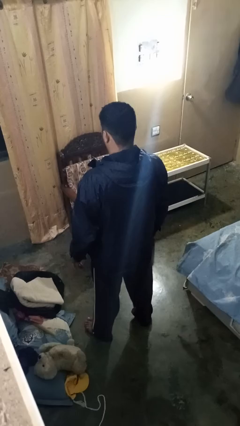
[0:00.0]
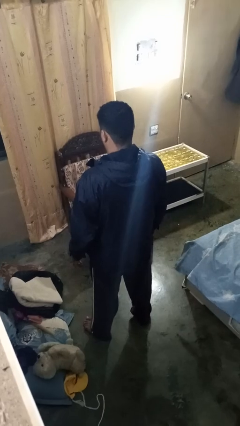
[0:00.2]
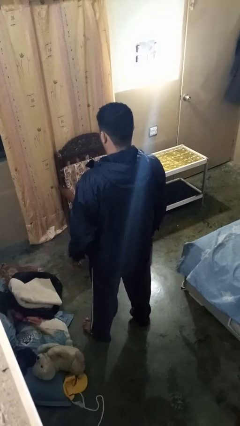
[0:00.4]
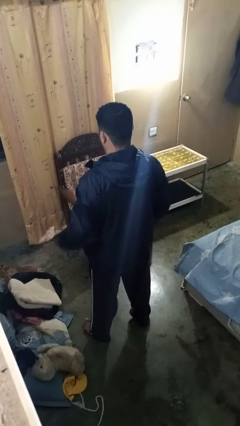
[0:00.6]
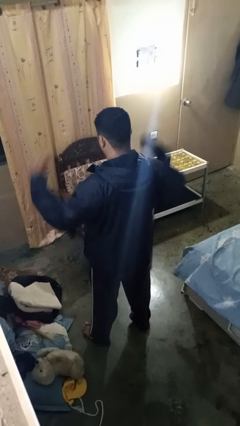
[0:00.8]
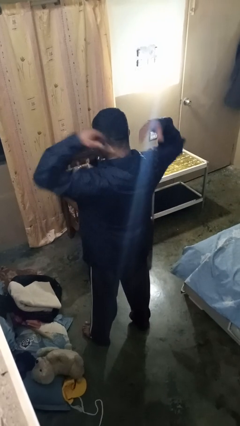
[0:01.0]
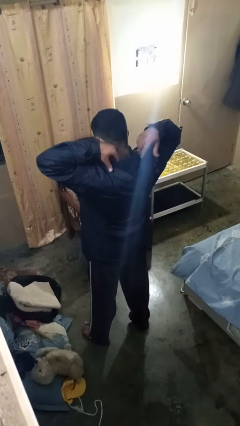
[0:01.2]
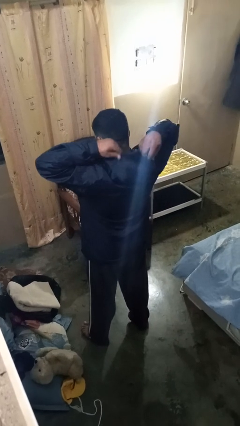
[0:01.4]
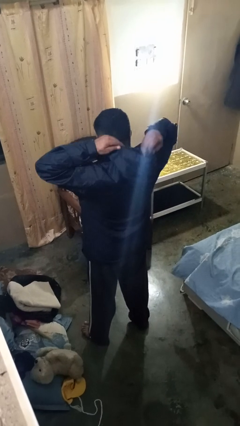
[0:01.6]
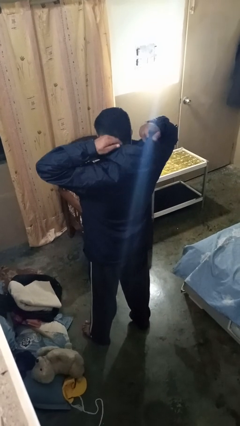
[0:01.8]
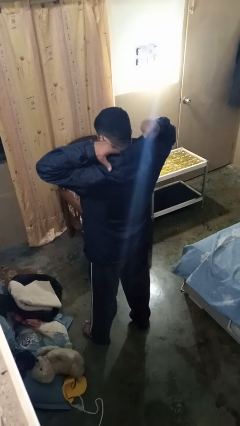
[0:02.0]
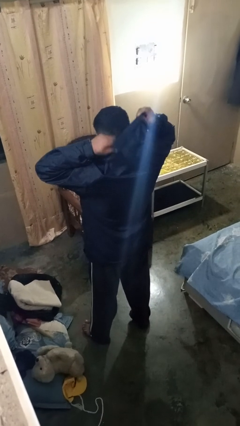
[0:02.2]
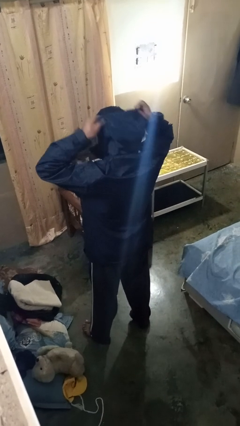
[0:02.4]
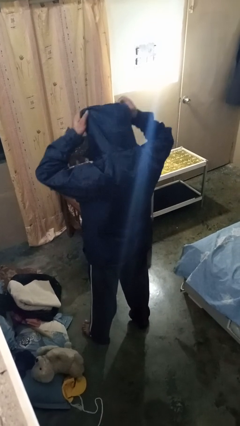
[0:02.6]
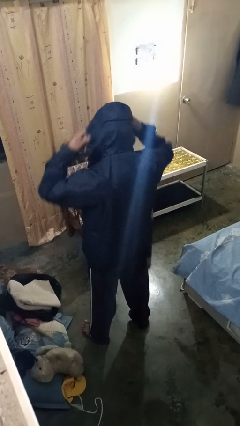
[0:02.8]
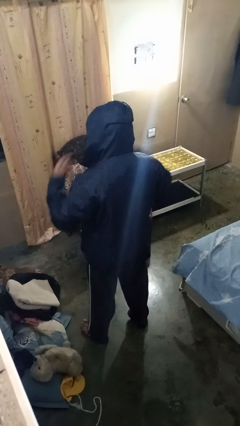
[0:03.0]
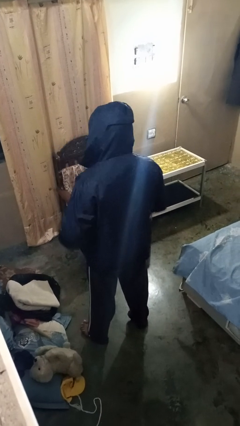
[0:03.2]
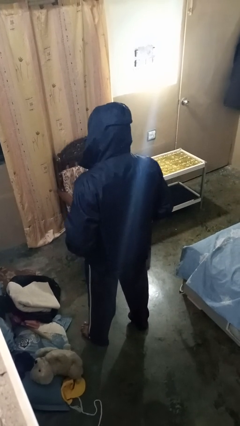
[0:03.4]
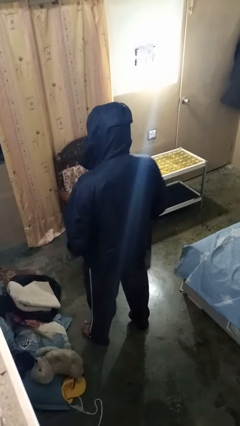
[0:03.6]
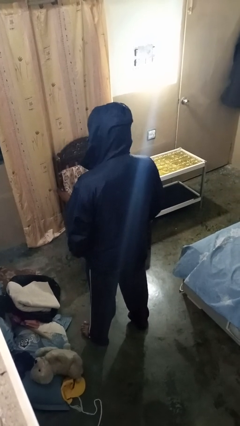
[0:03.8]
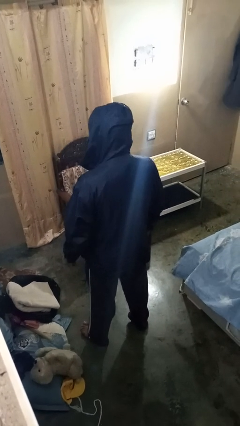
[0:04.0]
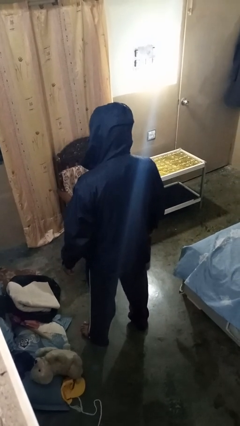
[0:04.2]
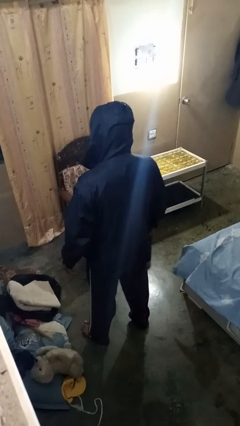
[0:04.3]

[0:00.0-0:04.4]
person puts on hoodie

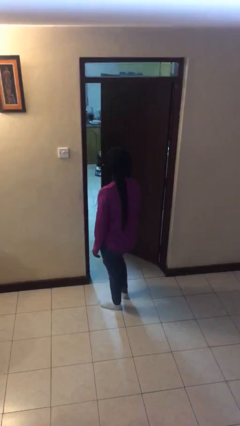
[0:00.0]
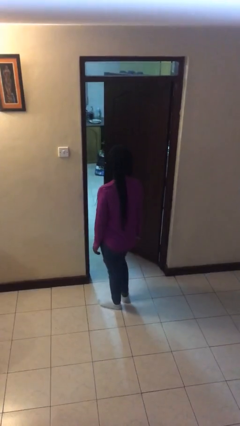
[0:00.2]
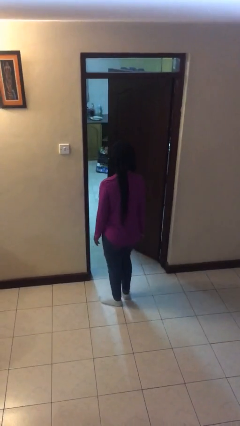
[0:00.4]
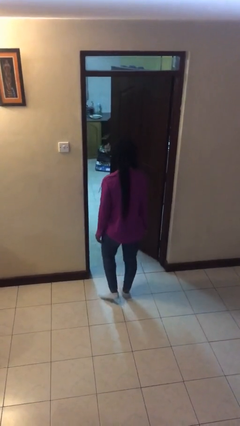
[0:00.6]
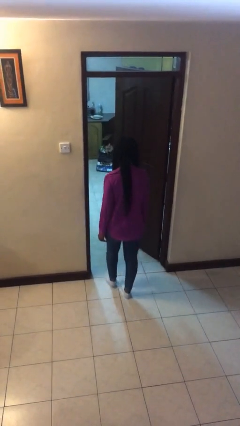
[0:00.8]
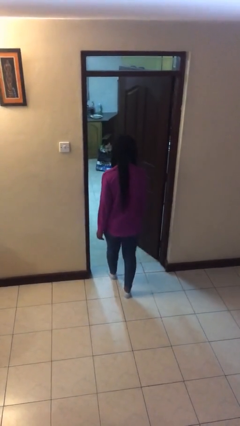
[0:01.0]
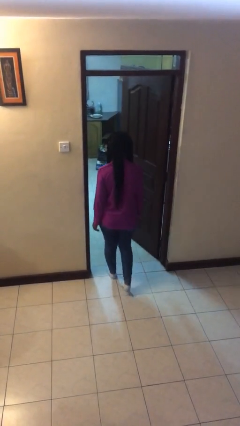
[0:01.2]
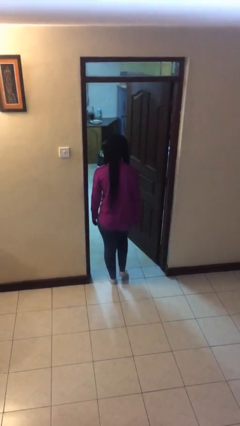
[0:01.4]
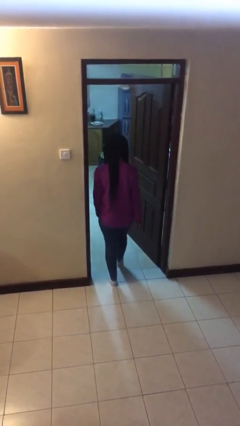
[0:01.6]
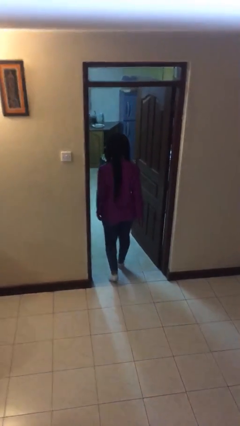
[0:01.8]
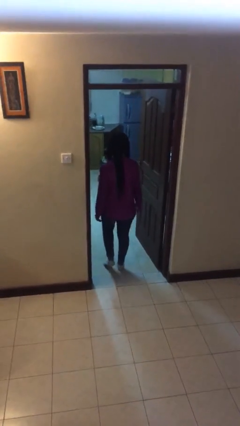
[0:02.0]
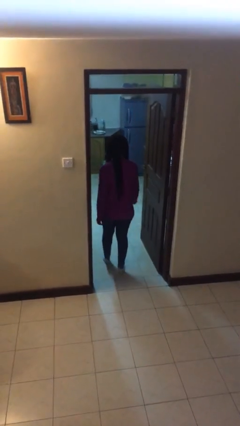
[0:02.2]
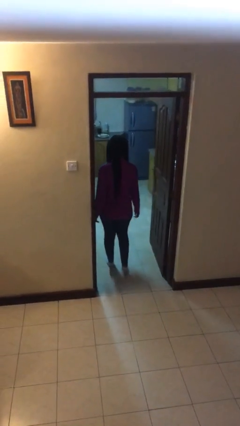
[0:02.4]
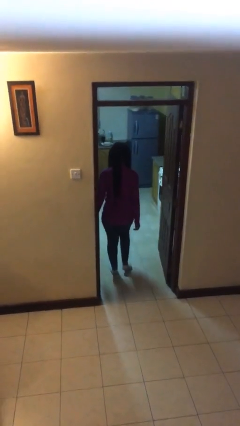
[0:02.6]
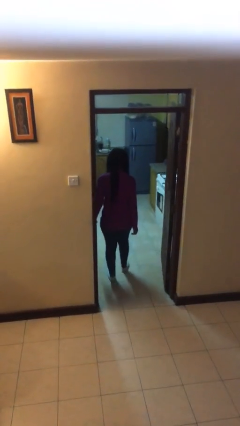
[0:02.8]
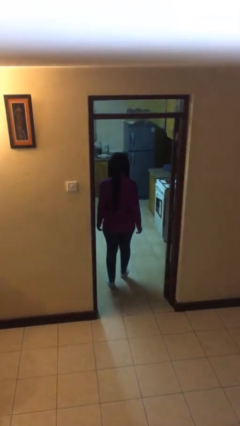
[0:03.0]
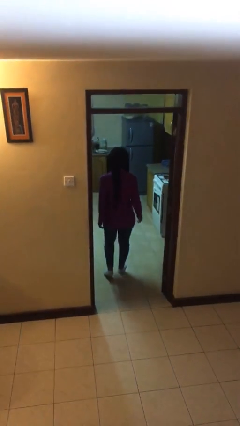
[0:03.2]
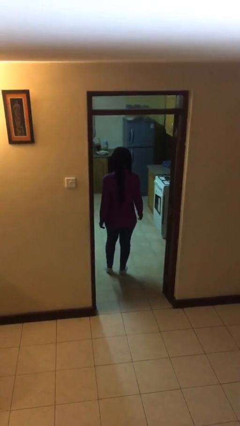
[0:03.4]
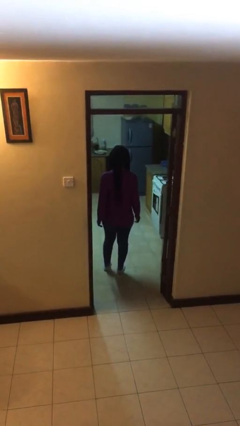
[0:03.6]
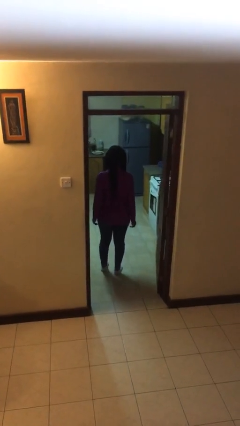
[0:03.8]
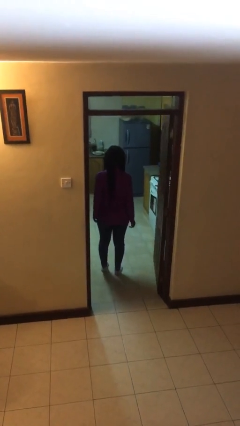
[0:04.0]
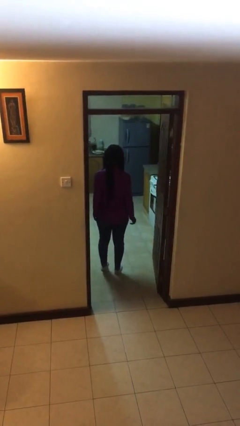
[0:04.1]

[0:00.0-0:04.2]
person exits scene through structure

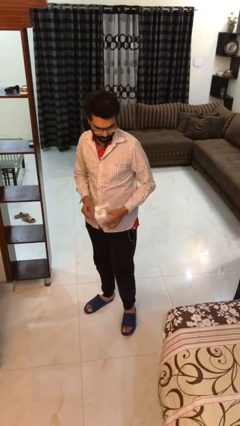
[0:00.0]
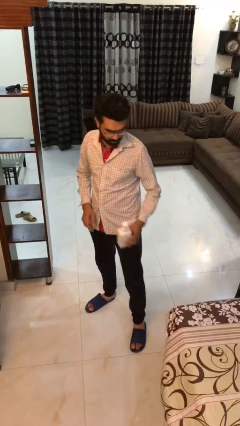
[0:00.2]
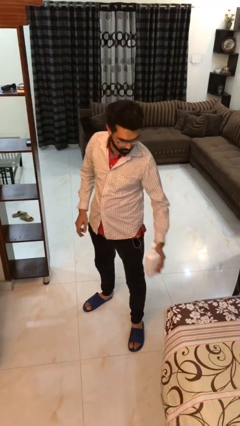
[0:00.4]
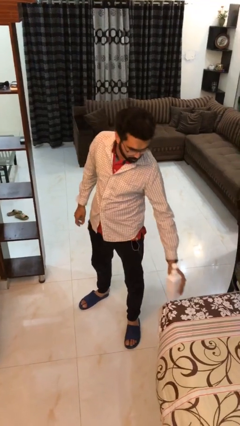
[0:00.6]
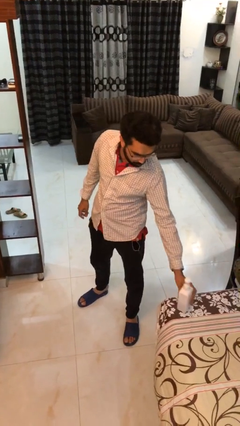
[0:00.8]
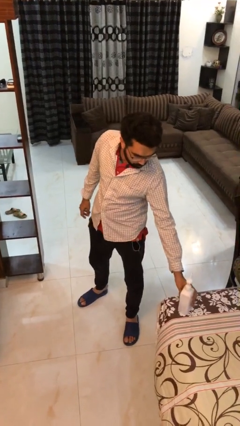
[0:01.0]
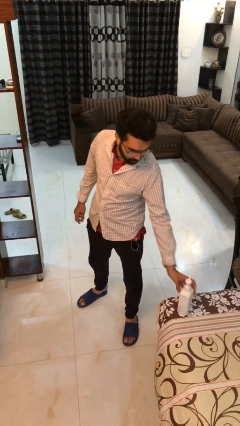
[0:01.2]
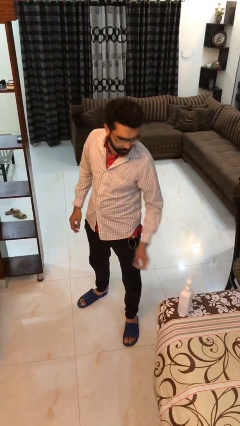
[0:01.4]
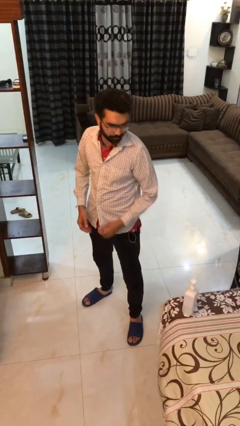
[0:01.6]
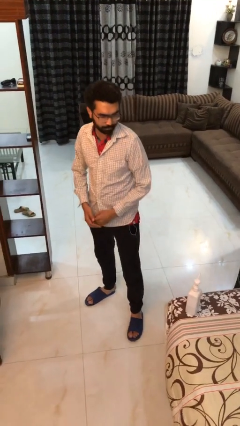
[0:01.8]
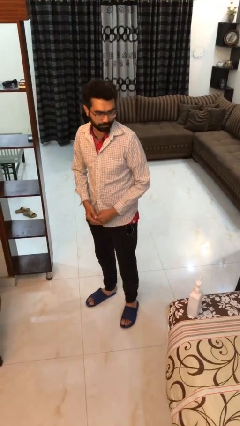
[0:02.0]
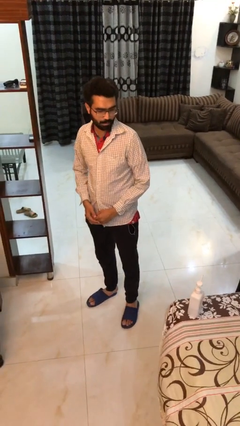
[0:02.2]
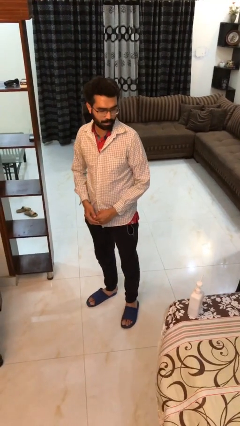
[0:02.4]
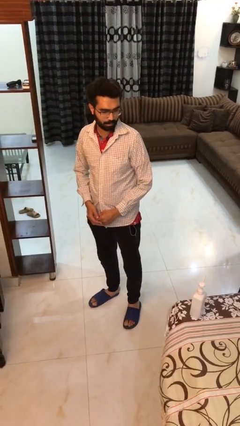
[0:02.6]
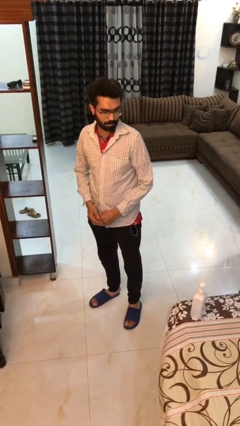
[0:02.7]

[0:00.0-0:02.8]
person puts down object on table

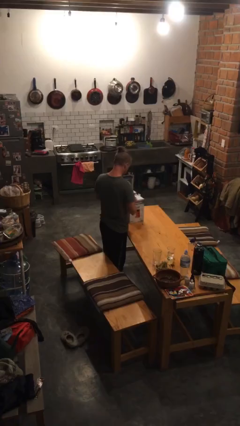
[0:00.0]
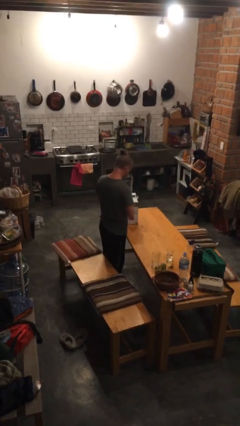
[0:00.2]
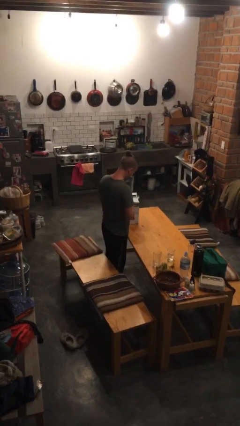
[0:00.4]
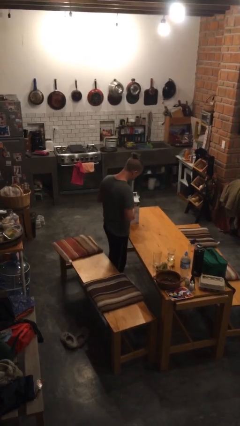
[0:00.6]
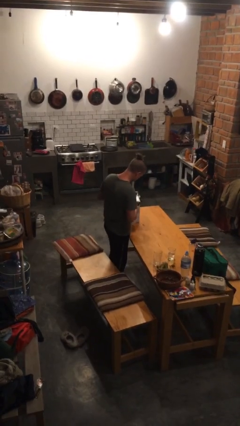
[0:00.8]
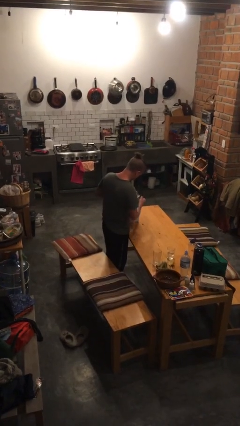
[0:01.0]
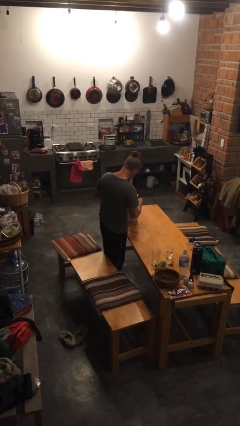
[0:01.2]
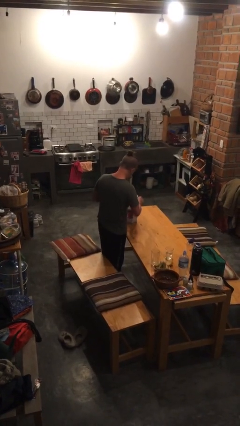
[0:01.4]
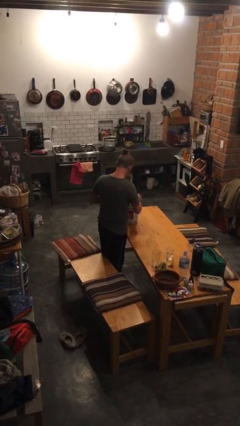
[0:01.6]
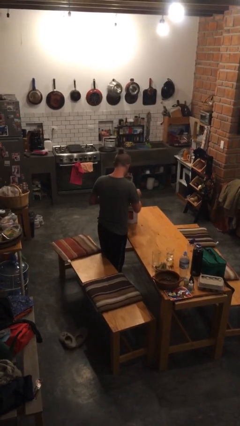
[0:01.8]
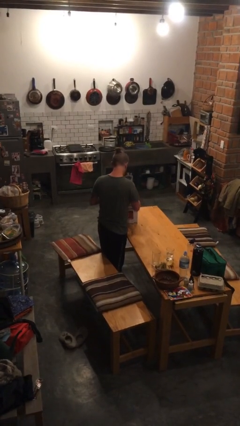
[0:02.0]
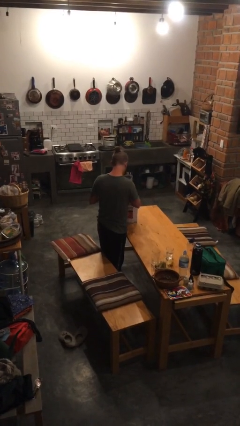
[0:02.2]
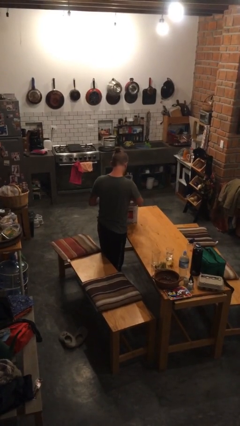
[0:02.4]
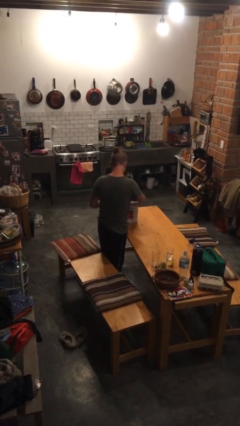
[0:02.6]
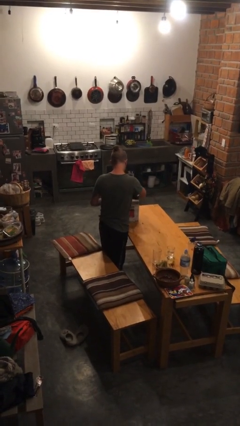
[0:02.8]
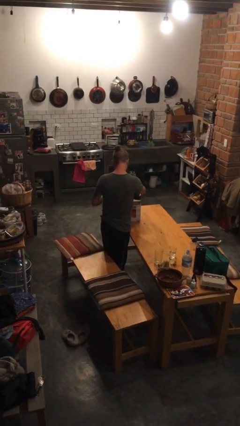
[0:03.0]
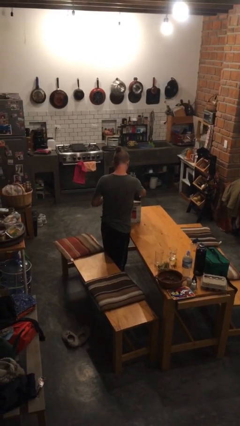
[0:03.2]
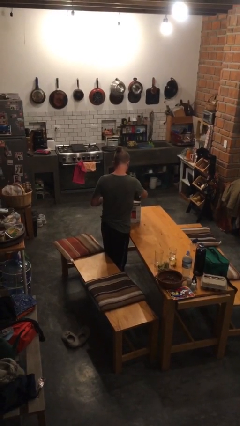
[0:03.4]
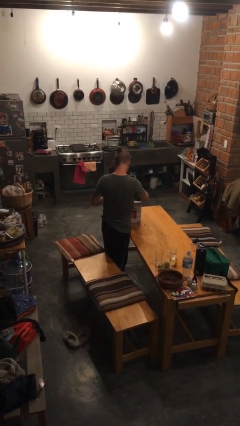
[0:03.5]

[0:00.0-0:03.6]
person opens box

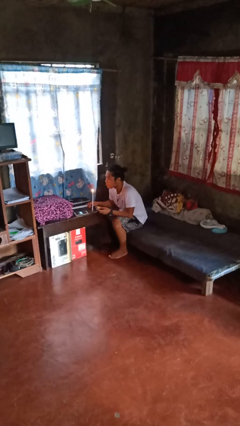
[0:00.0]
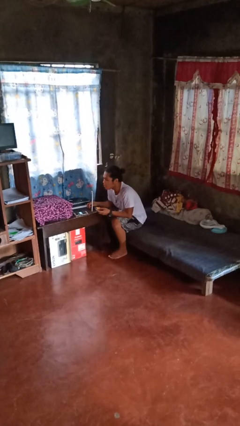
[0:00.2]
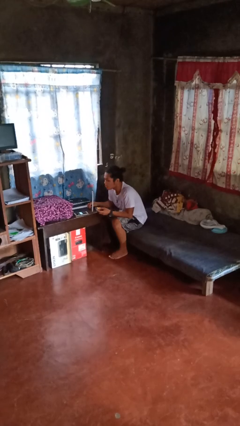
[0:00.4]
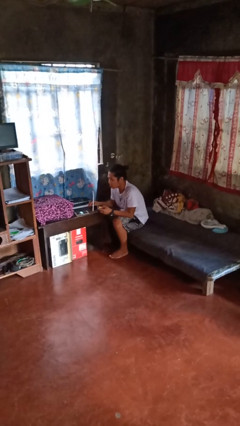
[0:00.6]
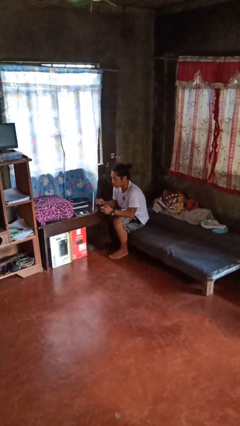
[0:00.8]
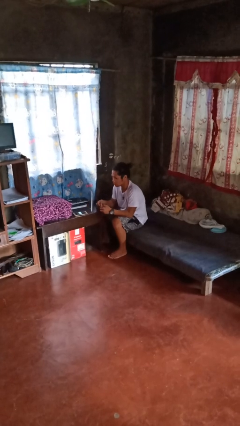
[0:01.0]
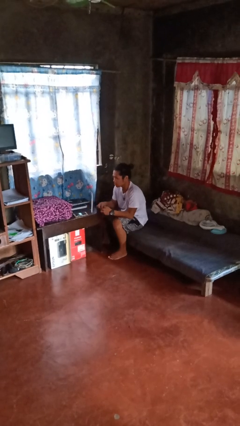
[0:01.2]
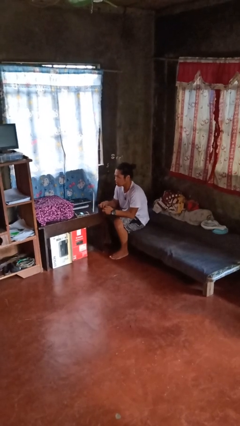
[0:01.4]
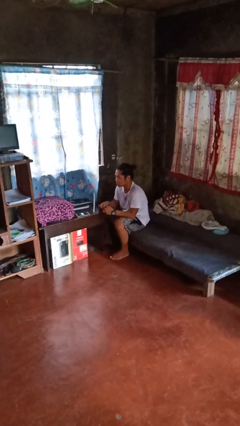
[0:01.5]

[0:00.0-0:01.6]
person extinguishes candle

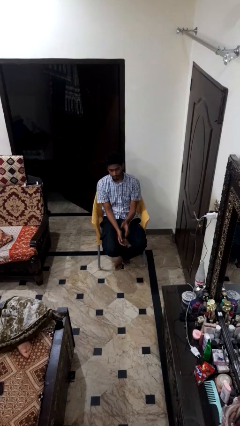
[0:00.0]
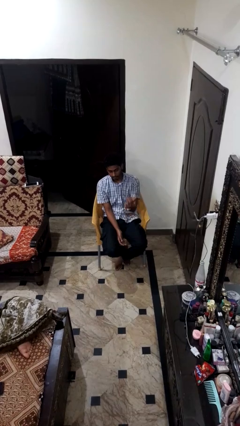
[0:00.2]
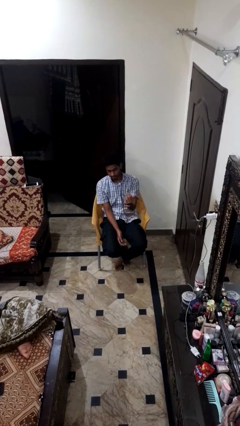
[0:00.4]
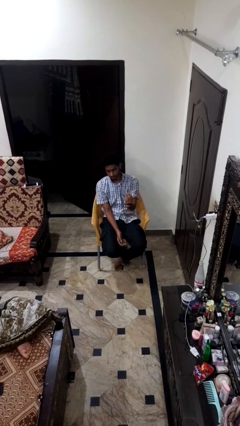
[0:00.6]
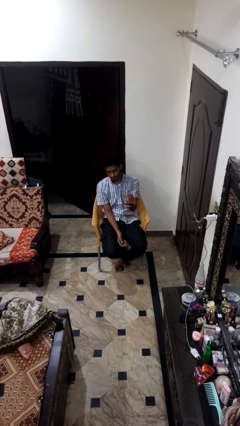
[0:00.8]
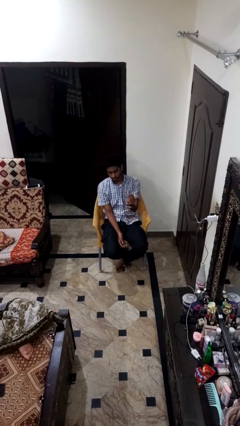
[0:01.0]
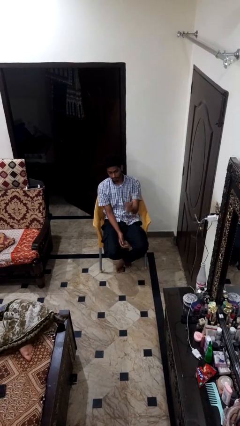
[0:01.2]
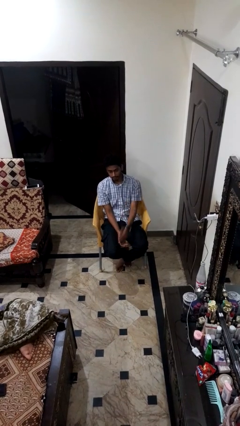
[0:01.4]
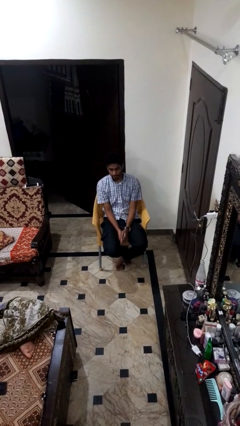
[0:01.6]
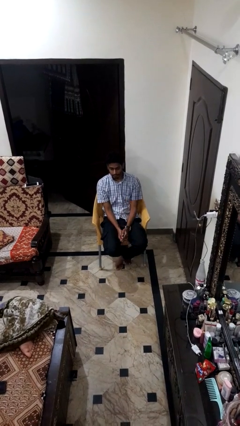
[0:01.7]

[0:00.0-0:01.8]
person gestures come here
